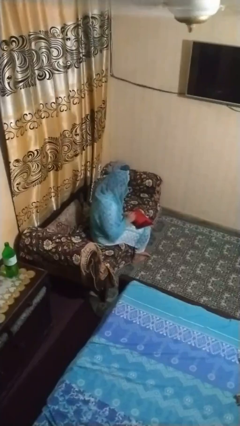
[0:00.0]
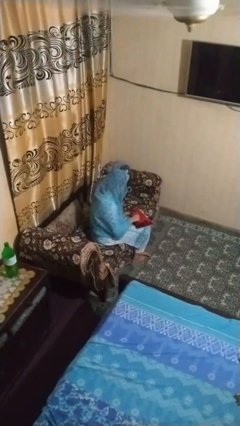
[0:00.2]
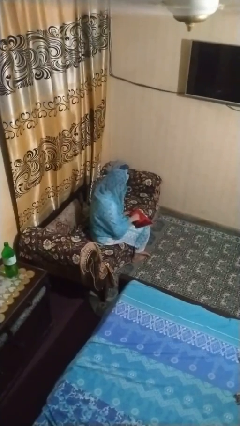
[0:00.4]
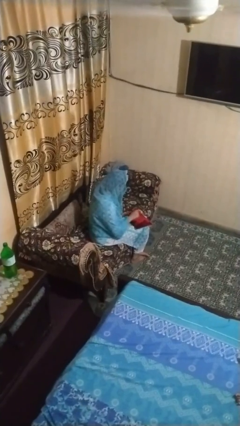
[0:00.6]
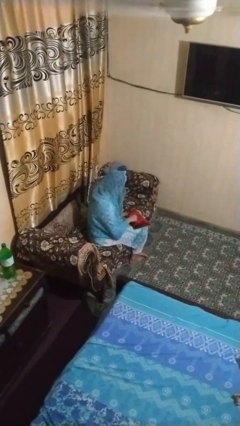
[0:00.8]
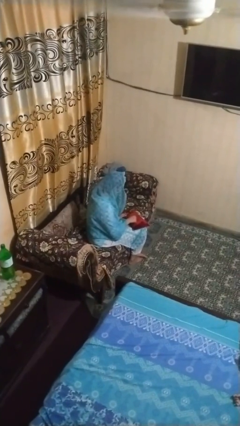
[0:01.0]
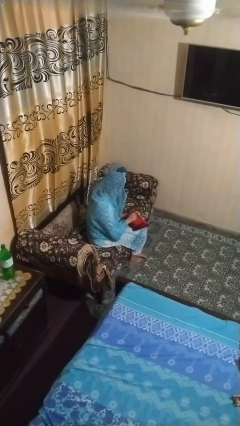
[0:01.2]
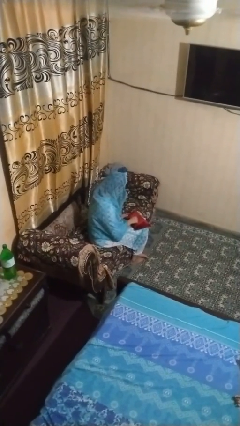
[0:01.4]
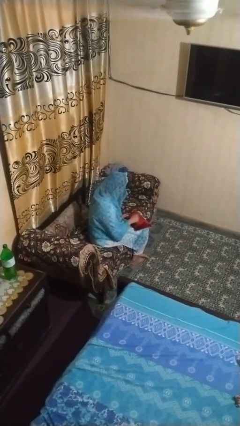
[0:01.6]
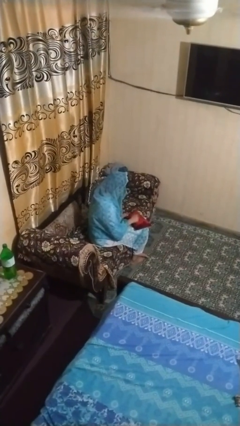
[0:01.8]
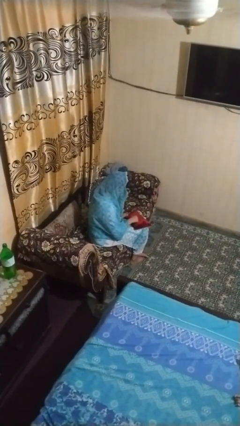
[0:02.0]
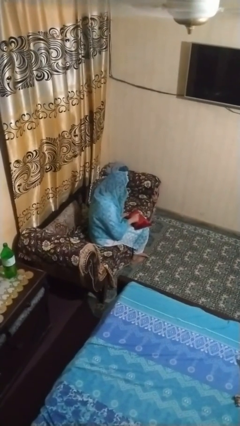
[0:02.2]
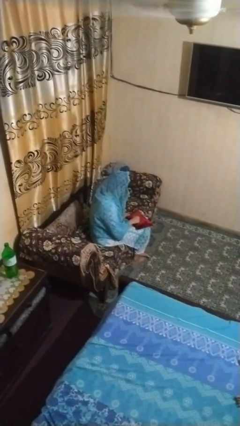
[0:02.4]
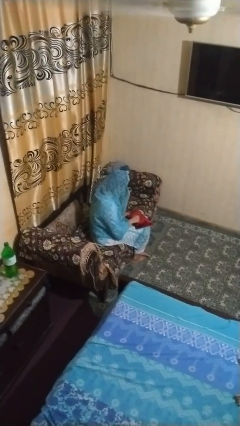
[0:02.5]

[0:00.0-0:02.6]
person taps object with finger

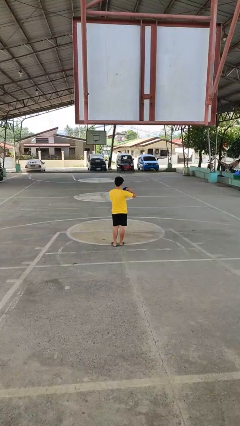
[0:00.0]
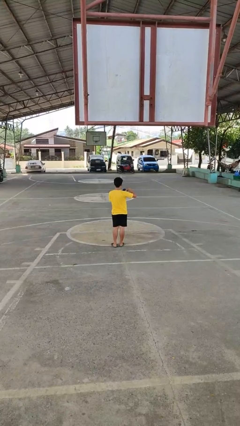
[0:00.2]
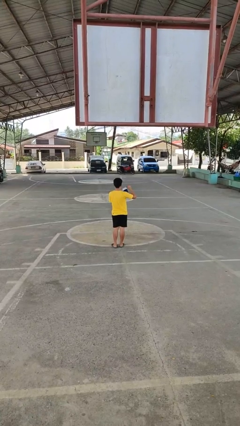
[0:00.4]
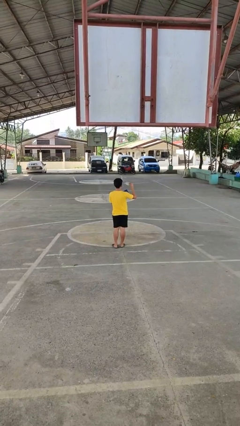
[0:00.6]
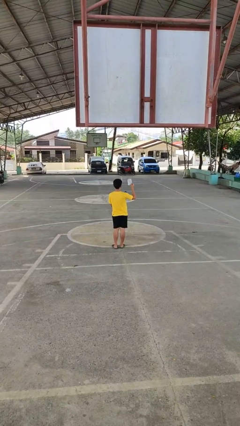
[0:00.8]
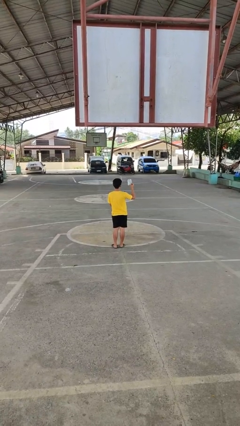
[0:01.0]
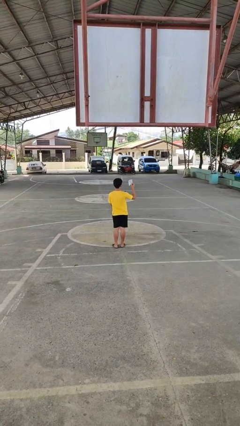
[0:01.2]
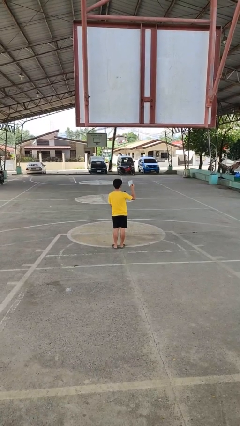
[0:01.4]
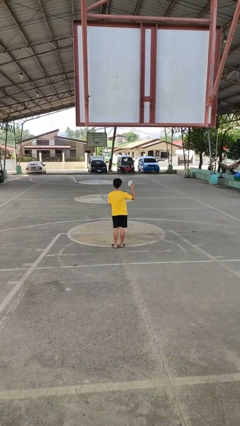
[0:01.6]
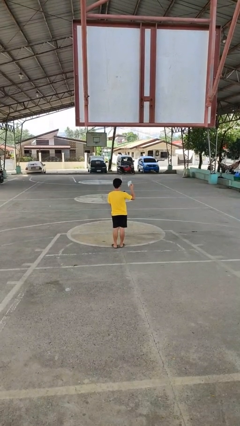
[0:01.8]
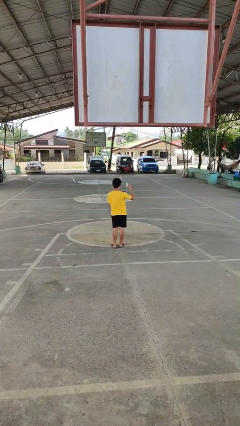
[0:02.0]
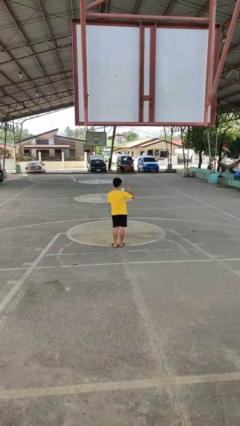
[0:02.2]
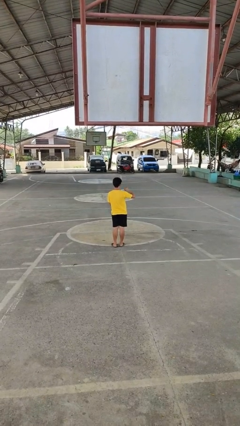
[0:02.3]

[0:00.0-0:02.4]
person takes object from purse

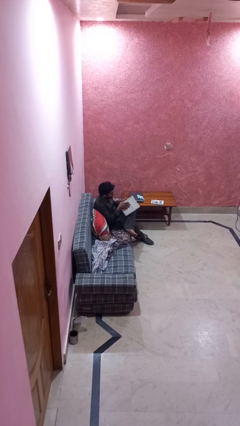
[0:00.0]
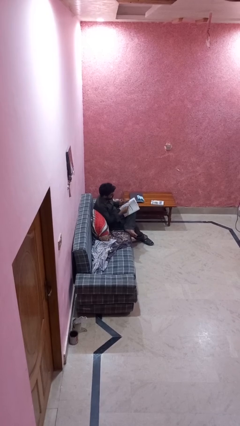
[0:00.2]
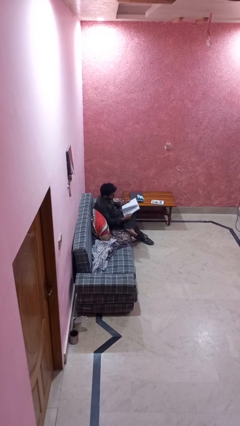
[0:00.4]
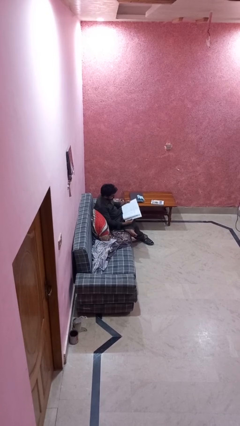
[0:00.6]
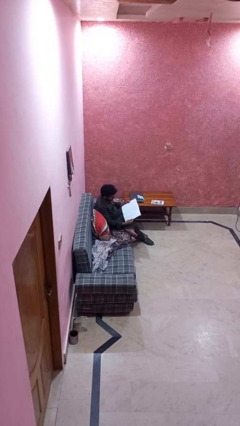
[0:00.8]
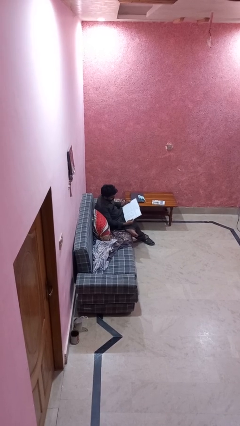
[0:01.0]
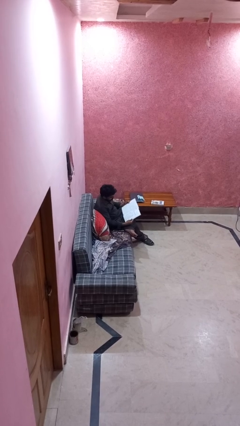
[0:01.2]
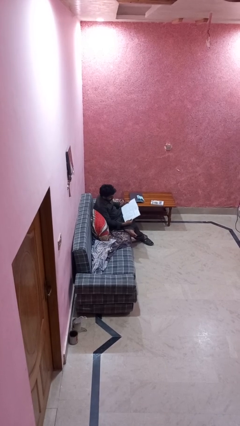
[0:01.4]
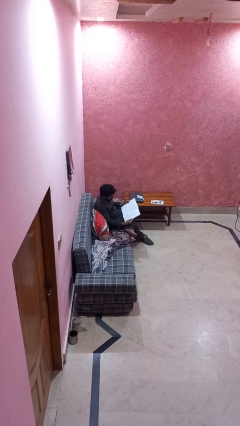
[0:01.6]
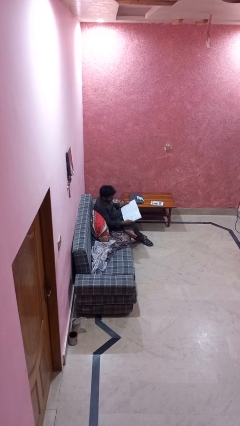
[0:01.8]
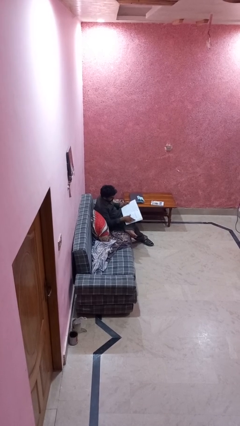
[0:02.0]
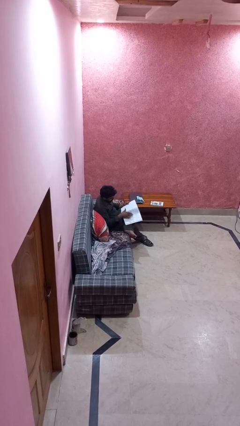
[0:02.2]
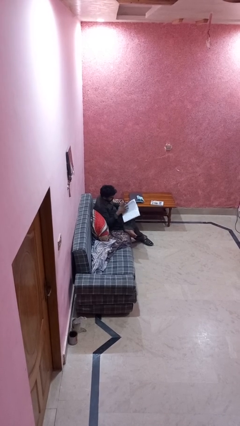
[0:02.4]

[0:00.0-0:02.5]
person reads magazine

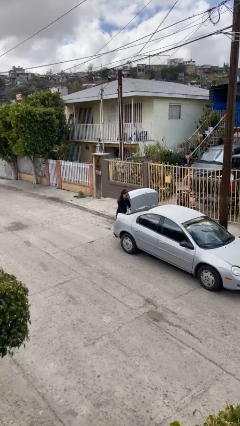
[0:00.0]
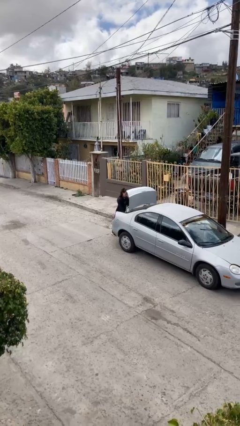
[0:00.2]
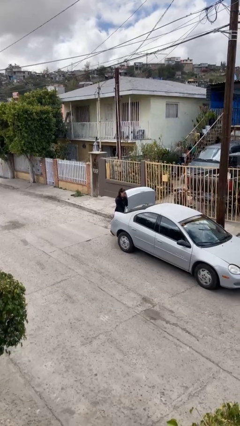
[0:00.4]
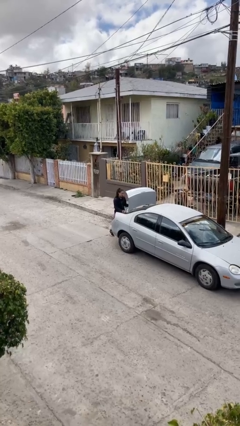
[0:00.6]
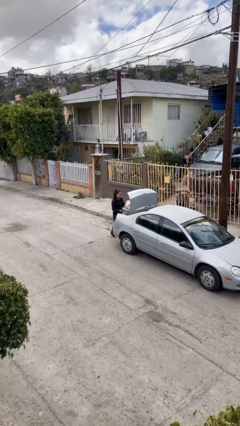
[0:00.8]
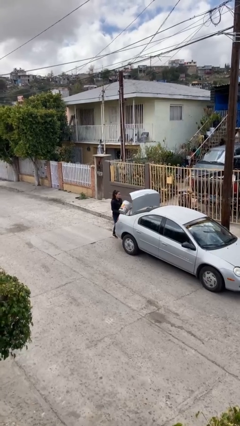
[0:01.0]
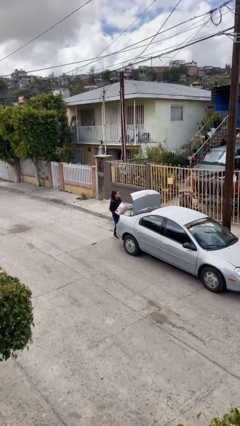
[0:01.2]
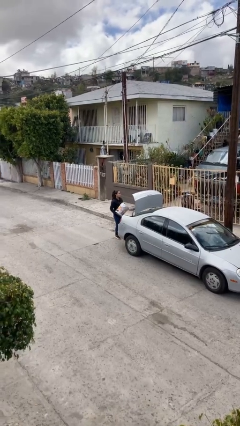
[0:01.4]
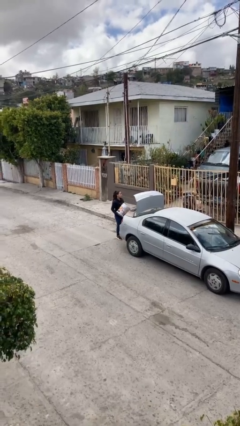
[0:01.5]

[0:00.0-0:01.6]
person unloads car

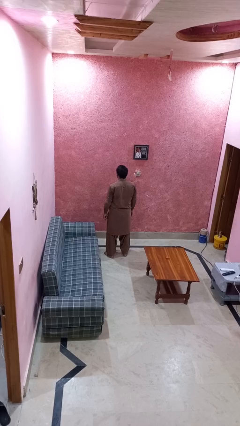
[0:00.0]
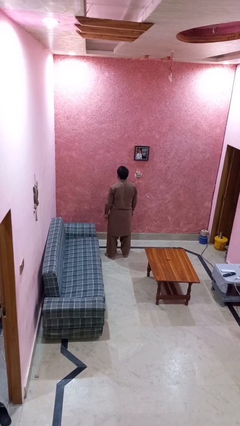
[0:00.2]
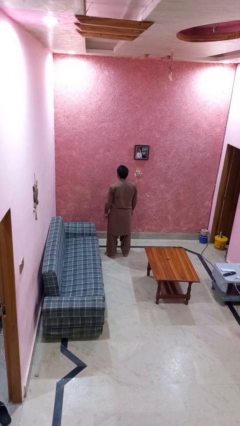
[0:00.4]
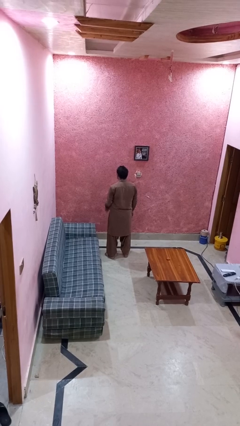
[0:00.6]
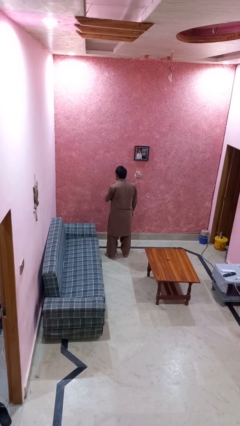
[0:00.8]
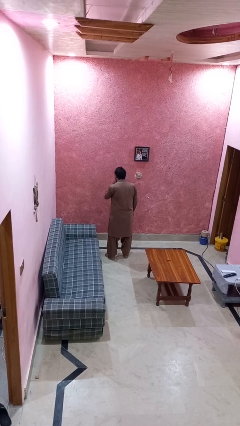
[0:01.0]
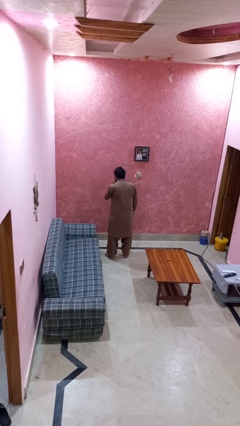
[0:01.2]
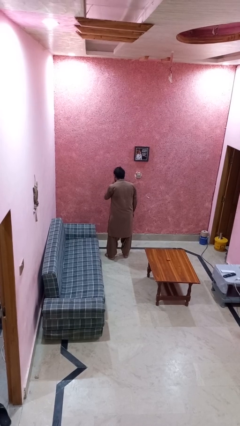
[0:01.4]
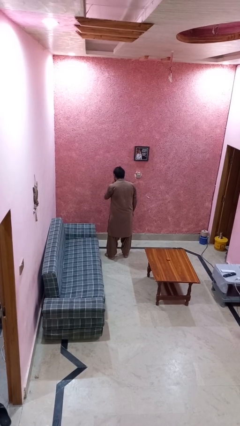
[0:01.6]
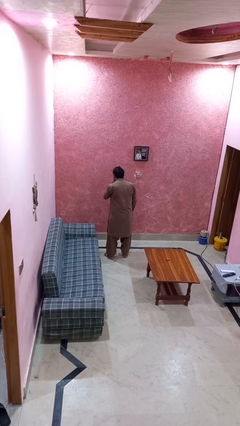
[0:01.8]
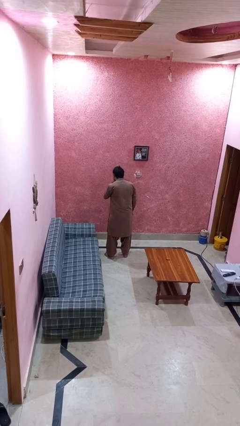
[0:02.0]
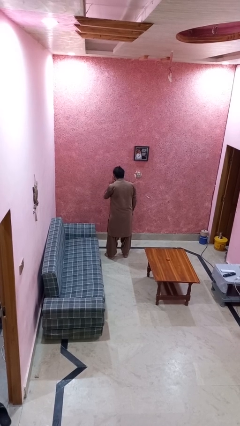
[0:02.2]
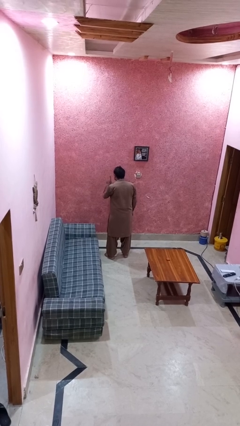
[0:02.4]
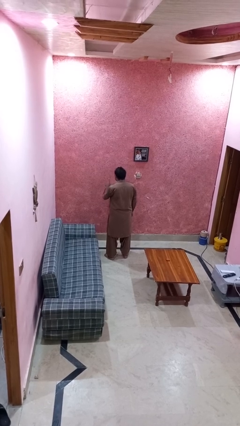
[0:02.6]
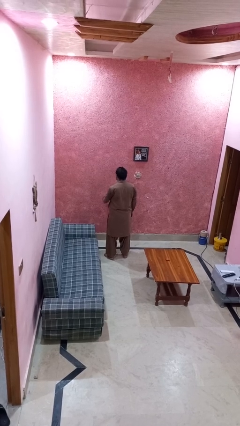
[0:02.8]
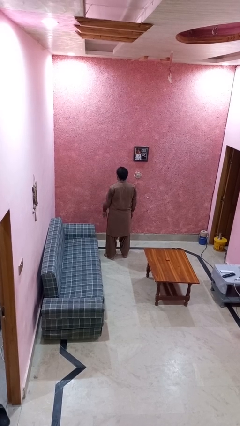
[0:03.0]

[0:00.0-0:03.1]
person gestures be quiet

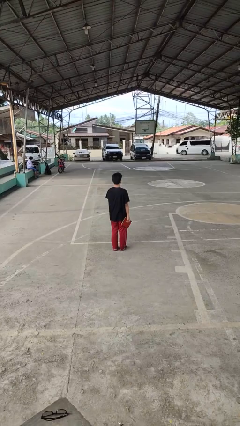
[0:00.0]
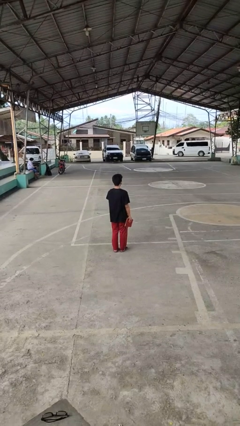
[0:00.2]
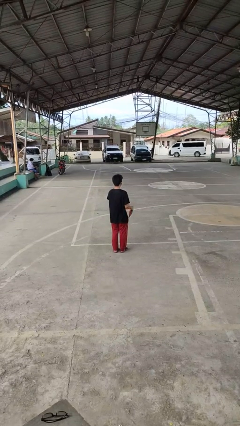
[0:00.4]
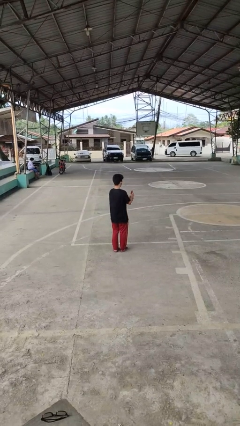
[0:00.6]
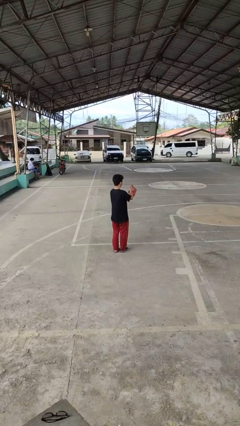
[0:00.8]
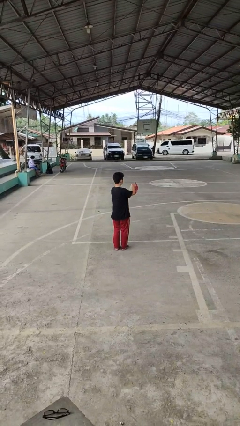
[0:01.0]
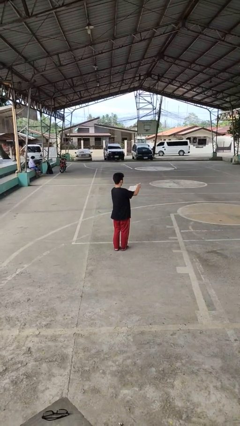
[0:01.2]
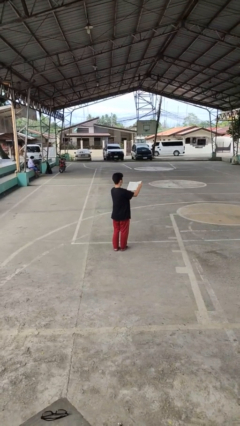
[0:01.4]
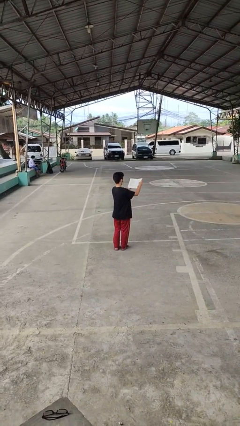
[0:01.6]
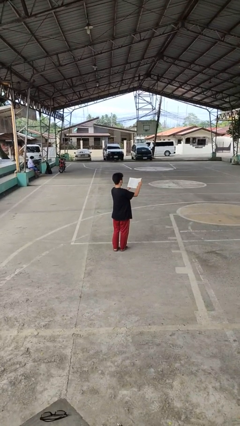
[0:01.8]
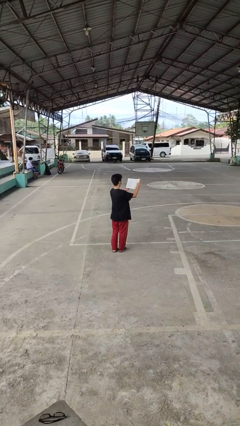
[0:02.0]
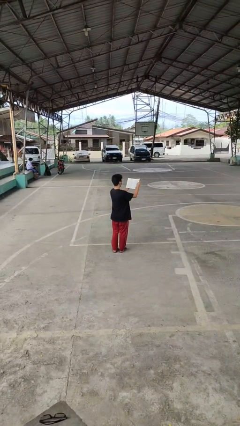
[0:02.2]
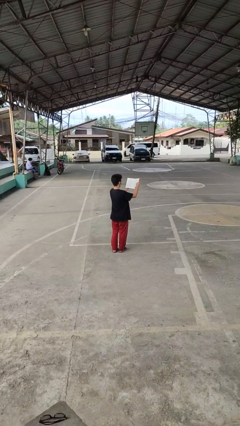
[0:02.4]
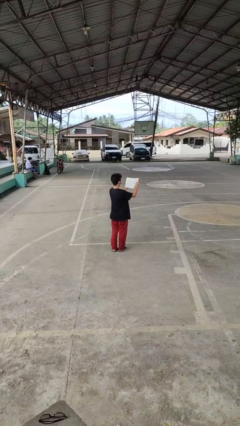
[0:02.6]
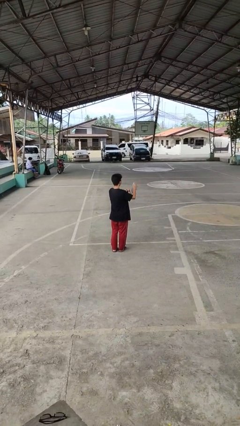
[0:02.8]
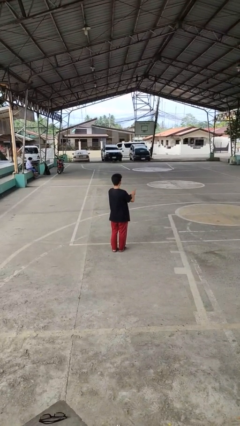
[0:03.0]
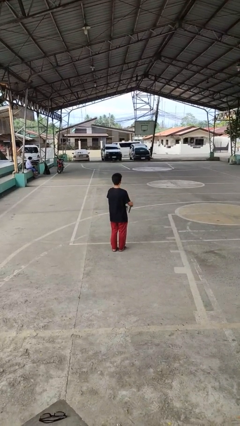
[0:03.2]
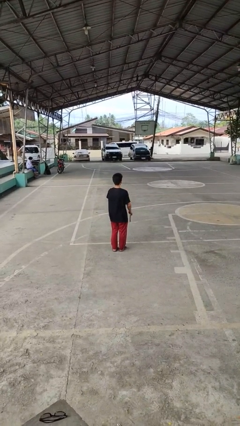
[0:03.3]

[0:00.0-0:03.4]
person reads book

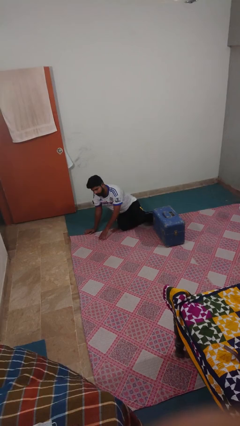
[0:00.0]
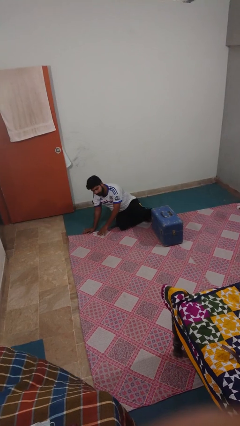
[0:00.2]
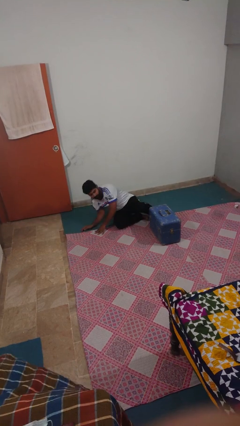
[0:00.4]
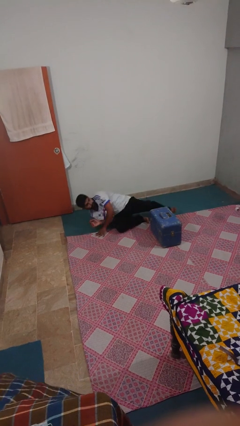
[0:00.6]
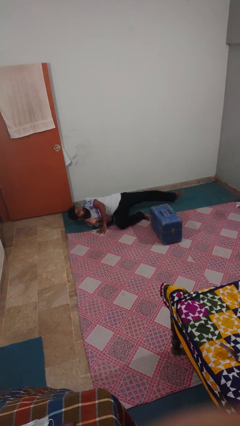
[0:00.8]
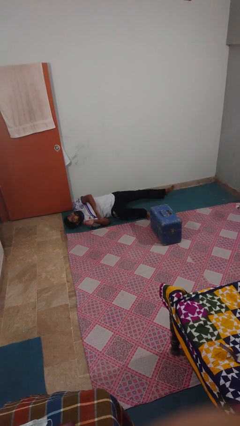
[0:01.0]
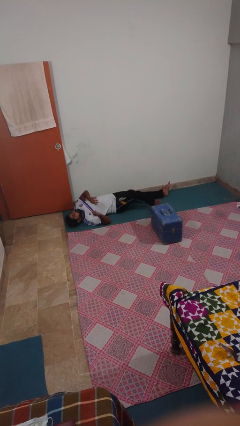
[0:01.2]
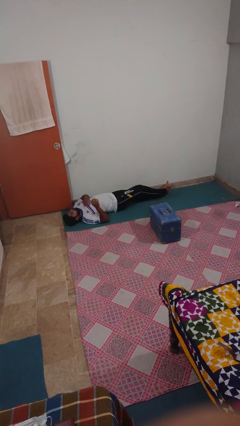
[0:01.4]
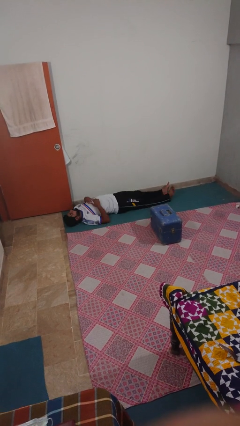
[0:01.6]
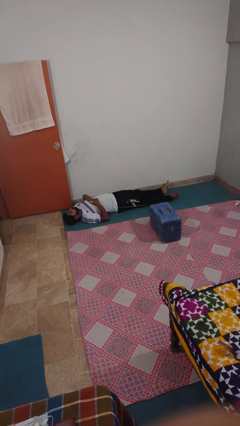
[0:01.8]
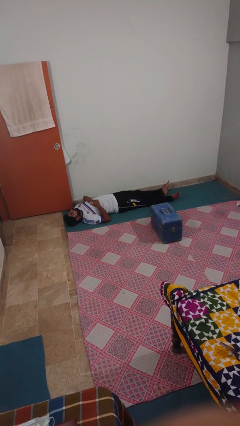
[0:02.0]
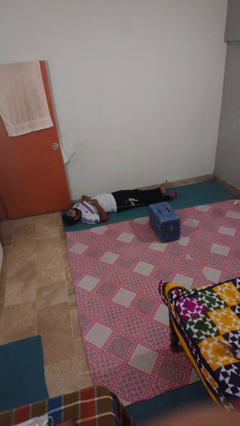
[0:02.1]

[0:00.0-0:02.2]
person lies down on floor
